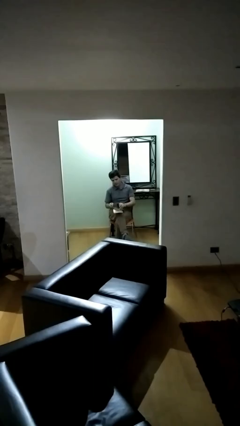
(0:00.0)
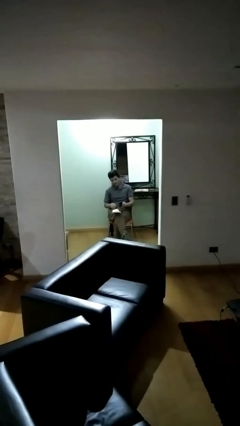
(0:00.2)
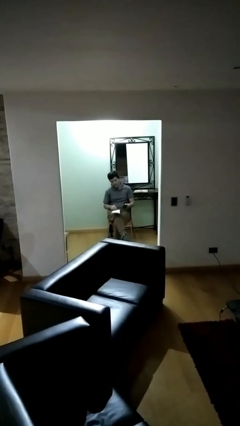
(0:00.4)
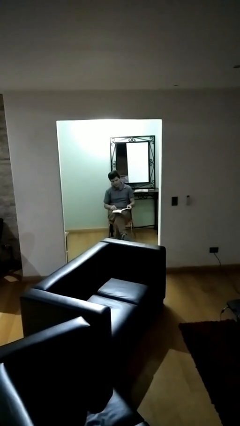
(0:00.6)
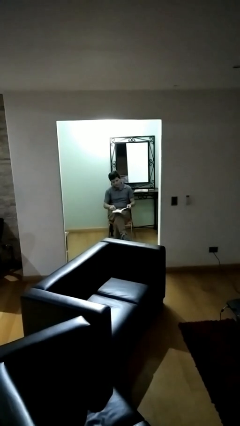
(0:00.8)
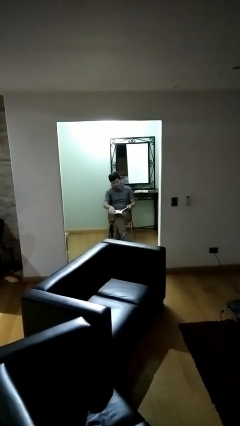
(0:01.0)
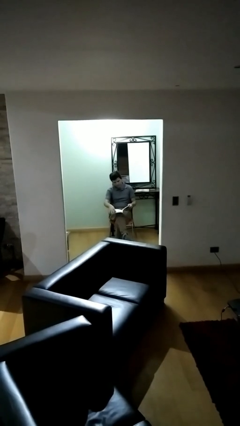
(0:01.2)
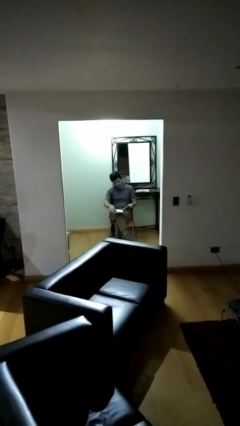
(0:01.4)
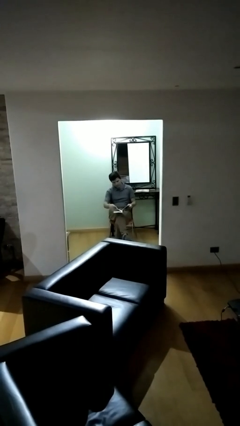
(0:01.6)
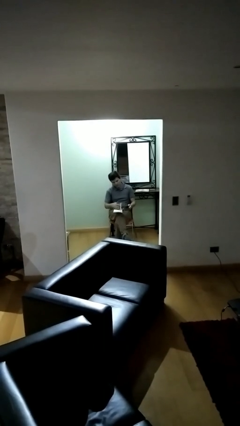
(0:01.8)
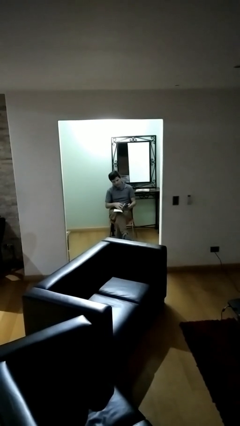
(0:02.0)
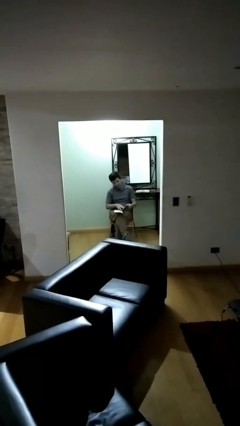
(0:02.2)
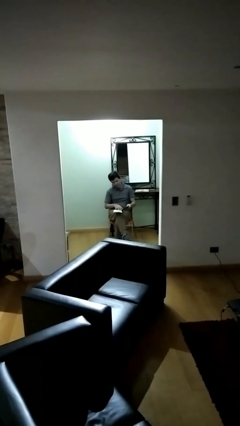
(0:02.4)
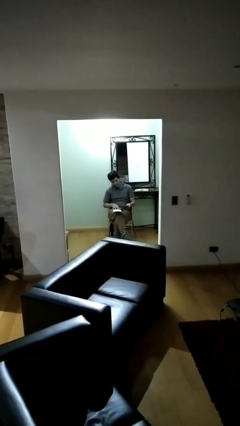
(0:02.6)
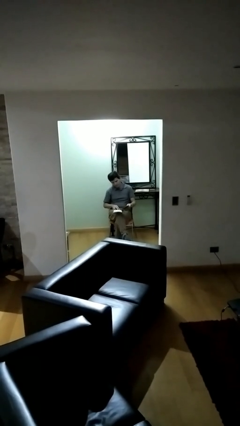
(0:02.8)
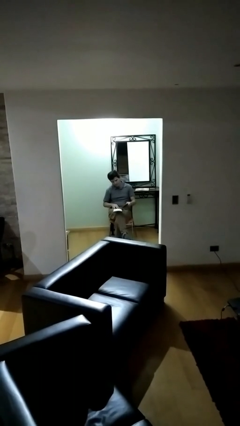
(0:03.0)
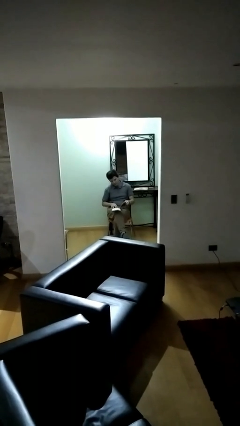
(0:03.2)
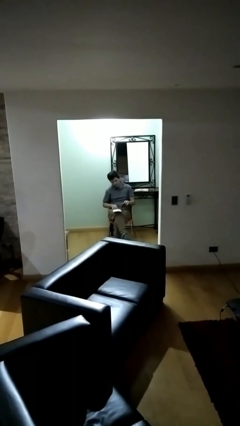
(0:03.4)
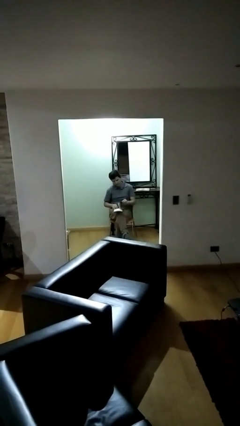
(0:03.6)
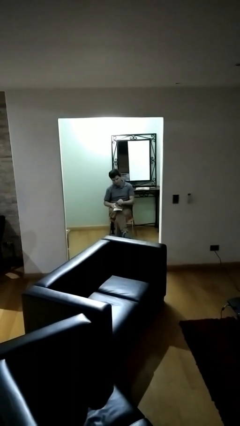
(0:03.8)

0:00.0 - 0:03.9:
person reads document

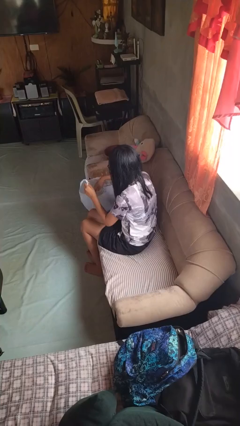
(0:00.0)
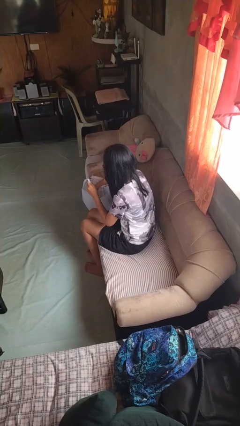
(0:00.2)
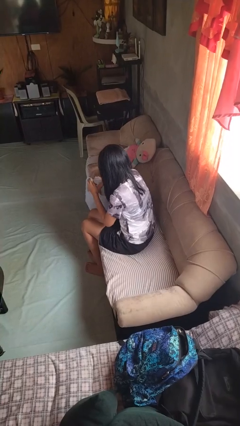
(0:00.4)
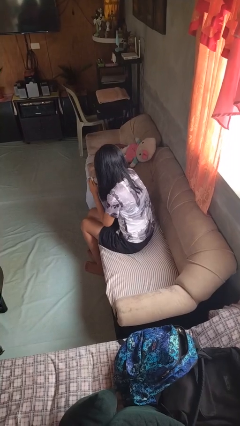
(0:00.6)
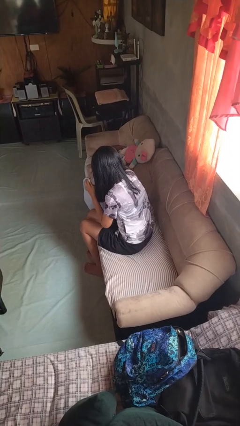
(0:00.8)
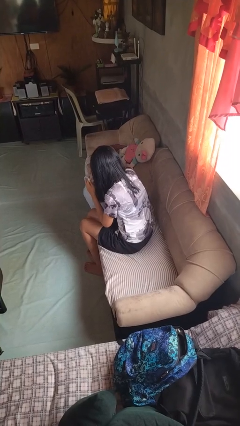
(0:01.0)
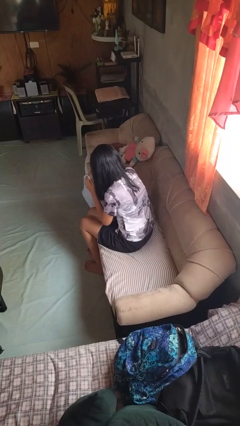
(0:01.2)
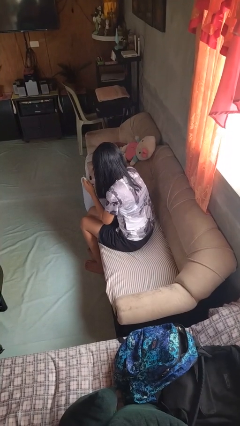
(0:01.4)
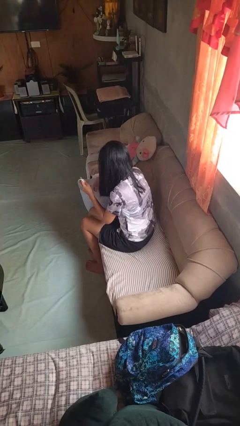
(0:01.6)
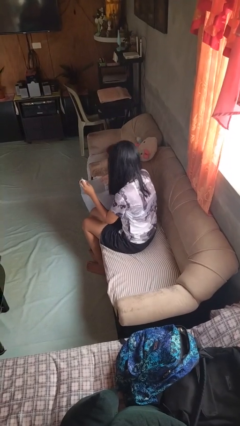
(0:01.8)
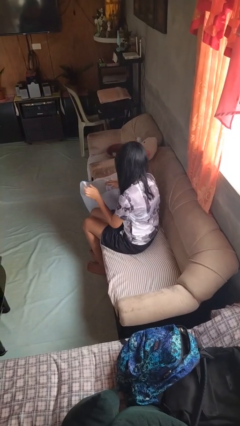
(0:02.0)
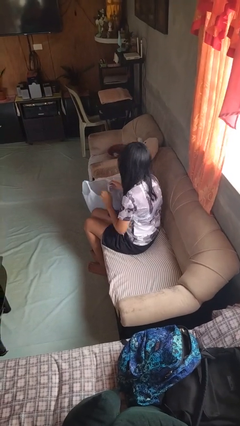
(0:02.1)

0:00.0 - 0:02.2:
person searches in bag

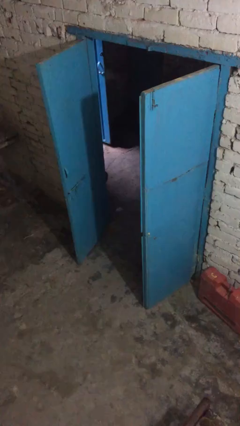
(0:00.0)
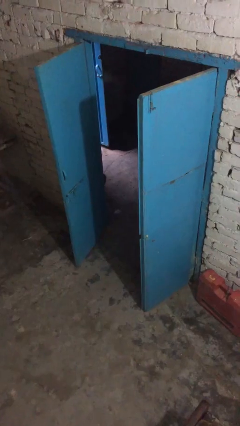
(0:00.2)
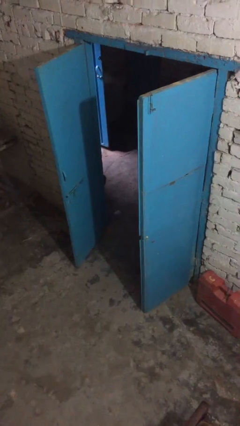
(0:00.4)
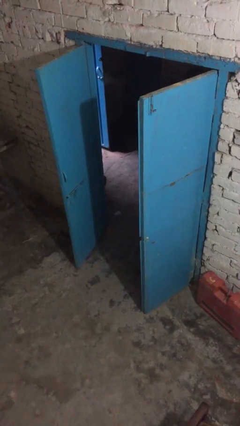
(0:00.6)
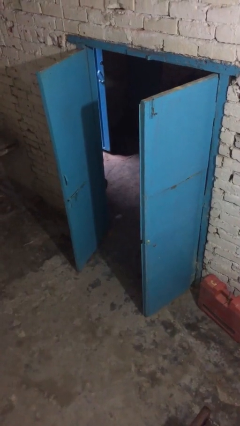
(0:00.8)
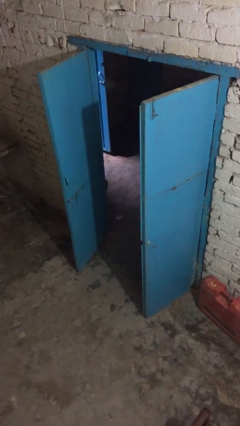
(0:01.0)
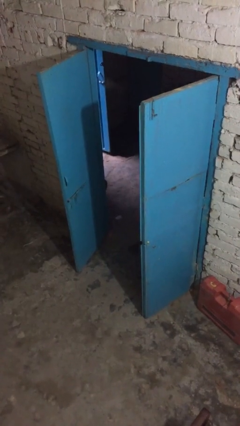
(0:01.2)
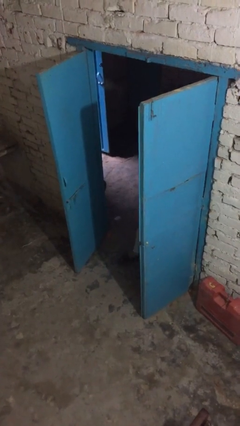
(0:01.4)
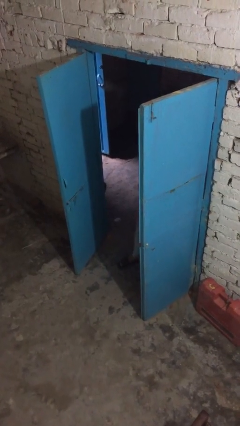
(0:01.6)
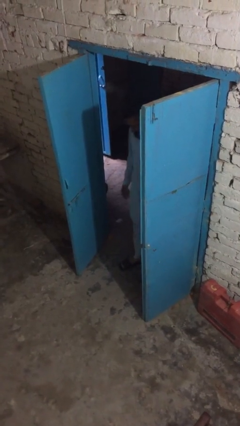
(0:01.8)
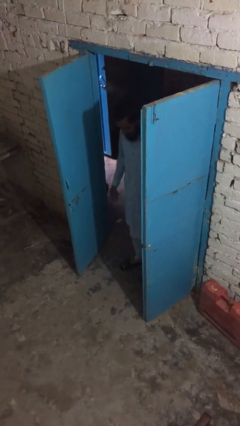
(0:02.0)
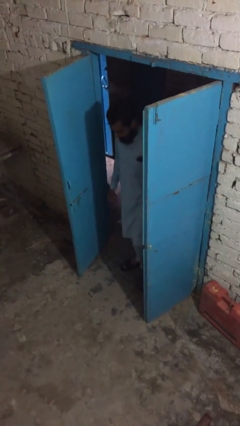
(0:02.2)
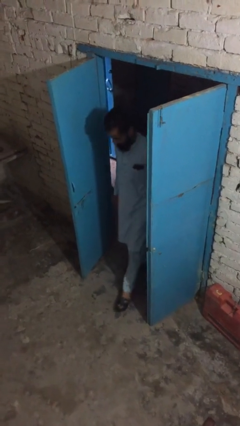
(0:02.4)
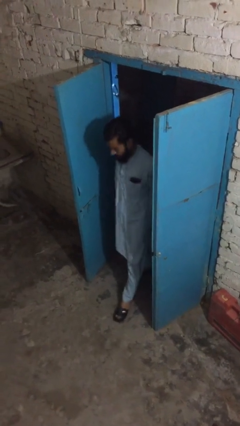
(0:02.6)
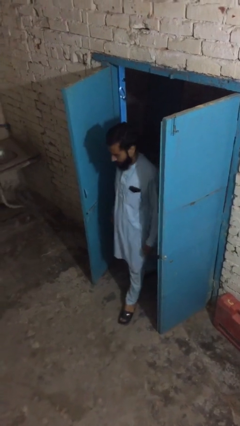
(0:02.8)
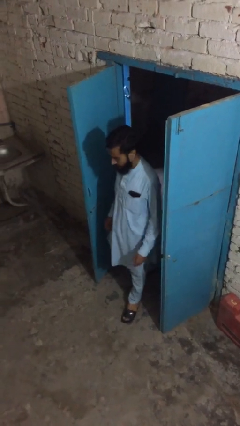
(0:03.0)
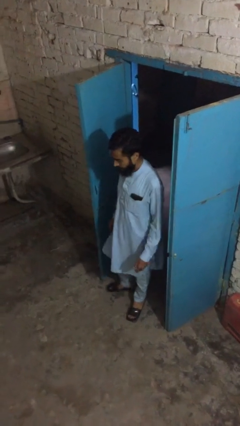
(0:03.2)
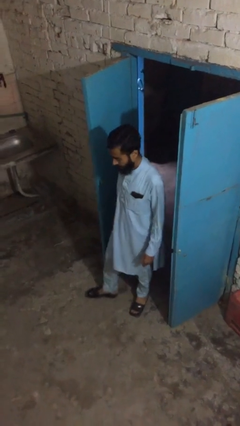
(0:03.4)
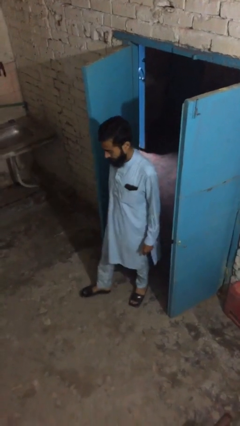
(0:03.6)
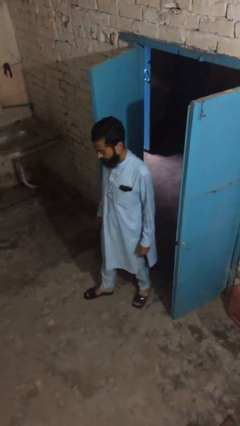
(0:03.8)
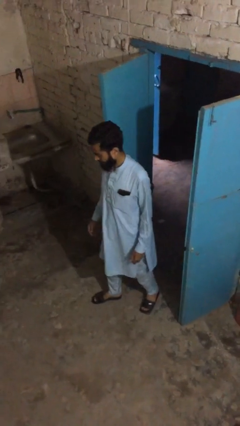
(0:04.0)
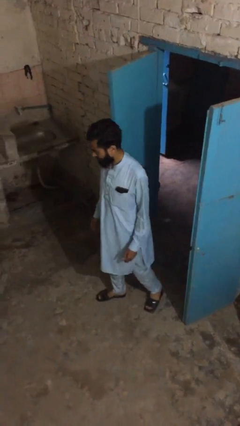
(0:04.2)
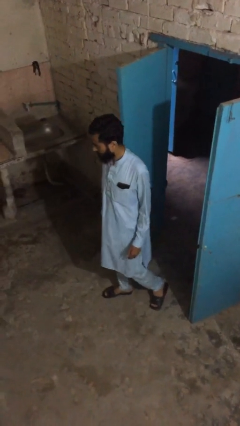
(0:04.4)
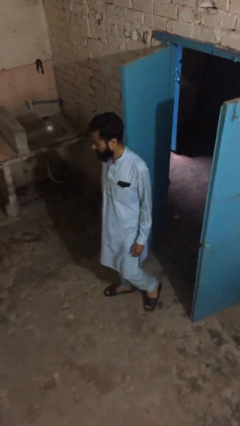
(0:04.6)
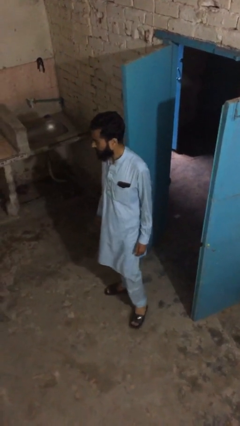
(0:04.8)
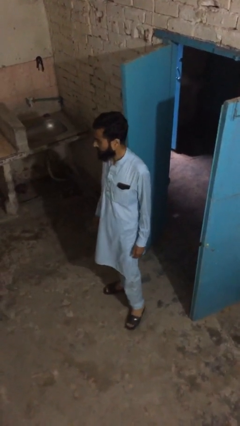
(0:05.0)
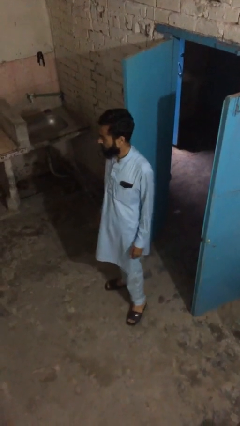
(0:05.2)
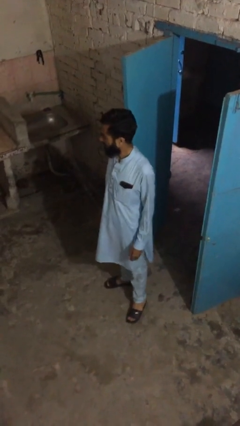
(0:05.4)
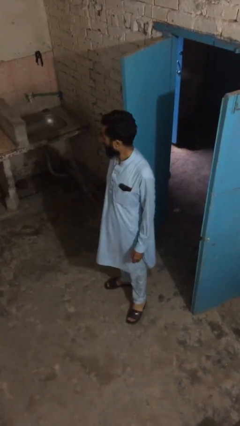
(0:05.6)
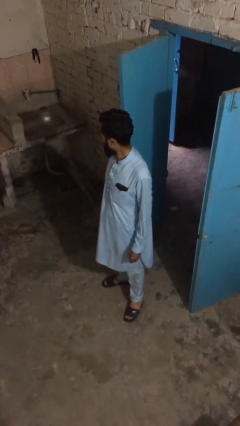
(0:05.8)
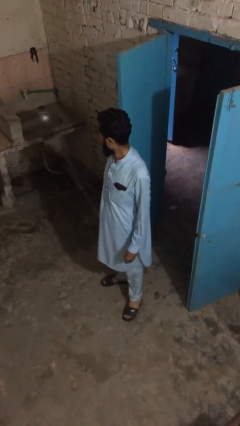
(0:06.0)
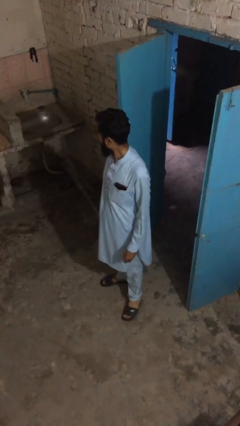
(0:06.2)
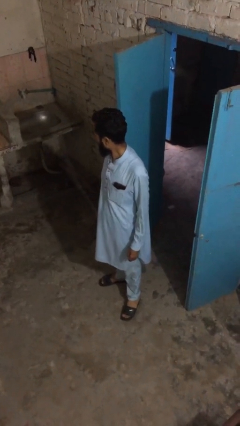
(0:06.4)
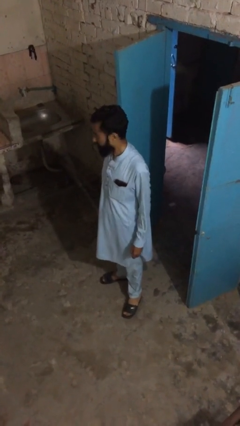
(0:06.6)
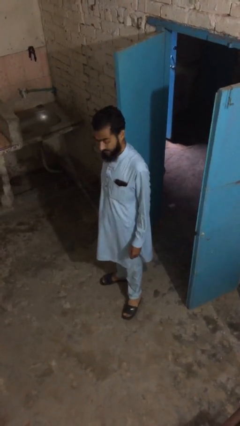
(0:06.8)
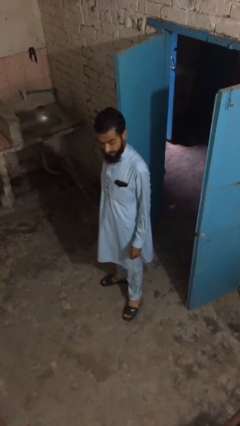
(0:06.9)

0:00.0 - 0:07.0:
person enters scene through structure

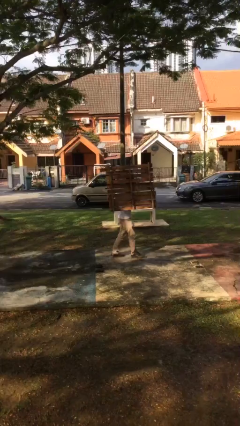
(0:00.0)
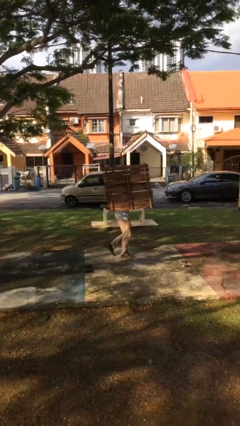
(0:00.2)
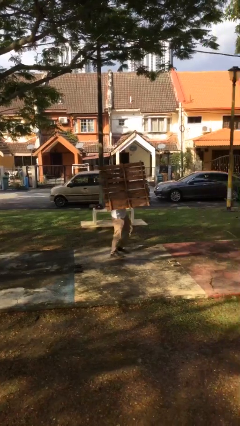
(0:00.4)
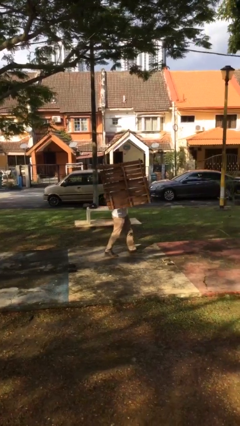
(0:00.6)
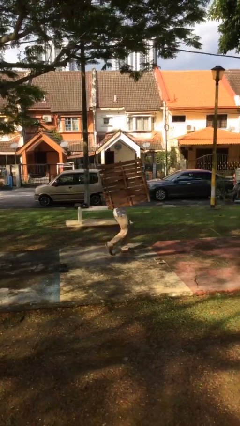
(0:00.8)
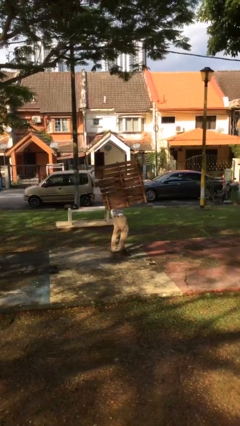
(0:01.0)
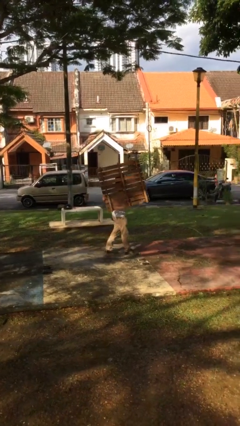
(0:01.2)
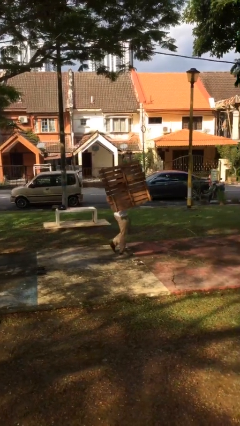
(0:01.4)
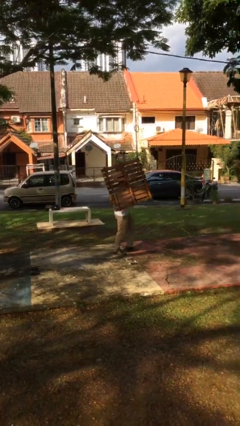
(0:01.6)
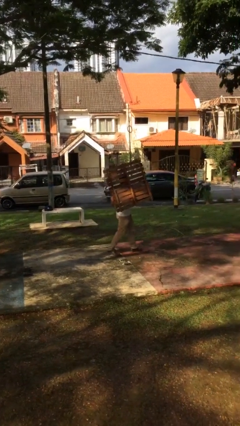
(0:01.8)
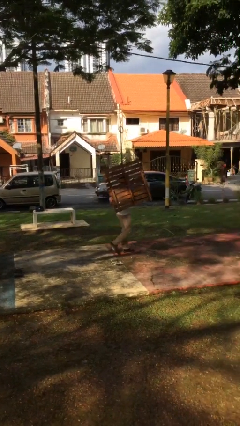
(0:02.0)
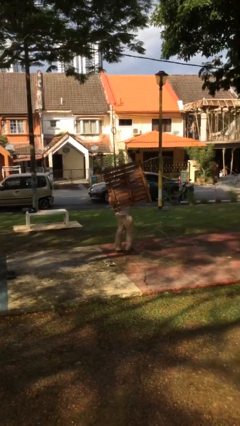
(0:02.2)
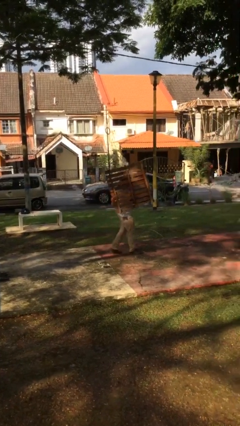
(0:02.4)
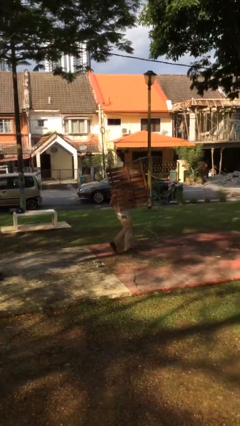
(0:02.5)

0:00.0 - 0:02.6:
person carries heavy object

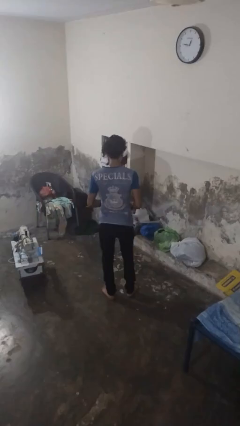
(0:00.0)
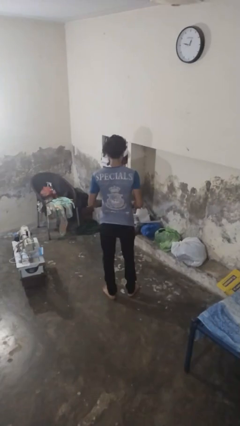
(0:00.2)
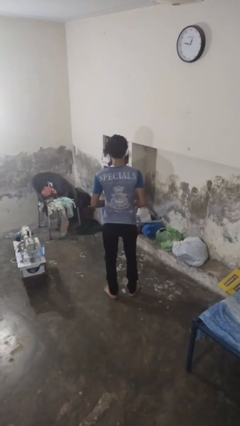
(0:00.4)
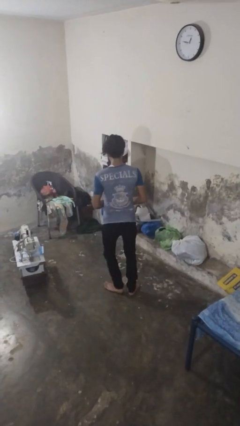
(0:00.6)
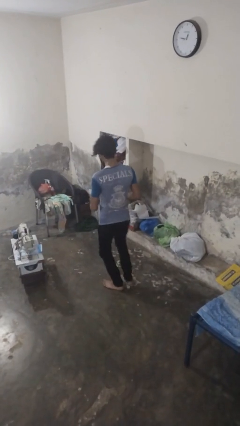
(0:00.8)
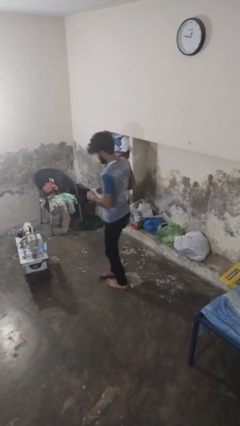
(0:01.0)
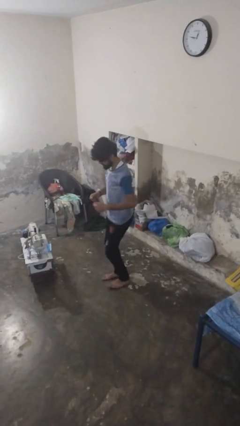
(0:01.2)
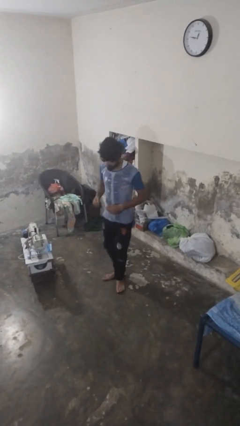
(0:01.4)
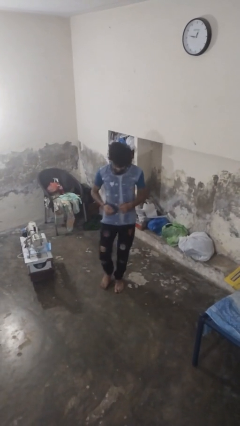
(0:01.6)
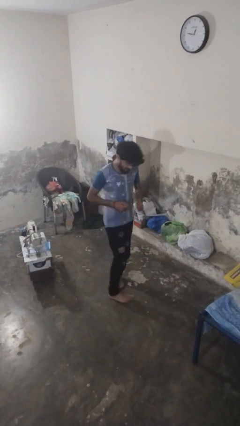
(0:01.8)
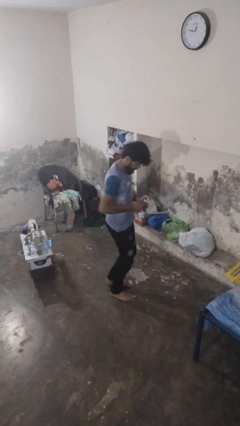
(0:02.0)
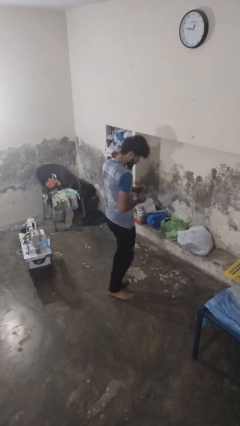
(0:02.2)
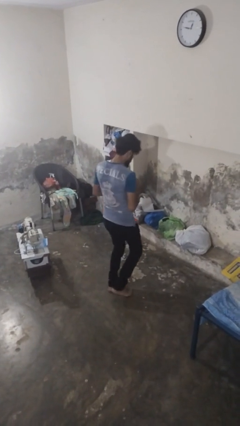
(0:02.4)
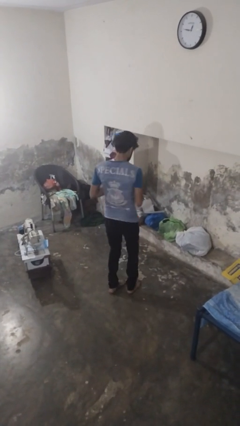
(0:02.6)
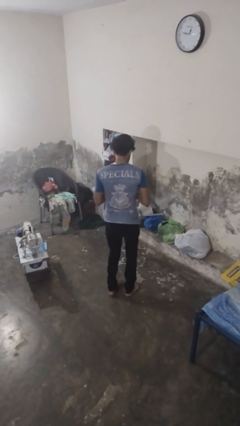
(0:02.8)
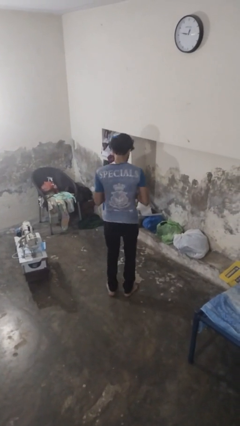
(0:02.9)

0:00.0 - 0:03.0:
person twirls
